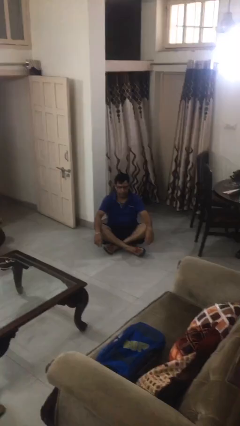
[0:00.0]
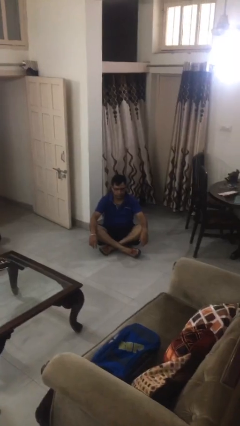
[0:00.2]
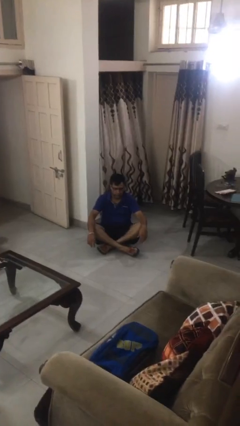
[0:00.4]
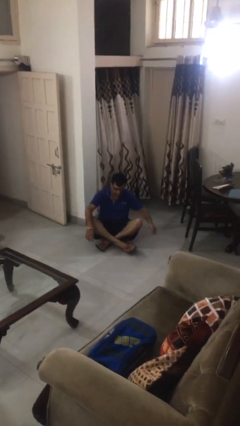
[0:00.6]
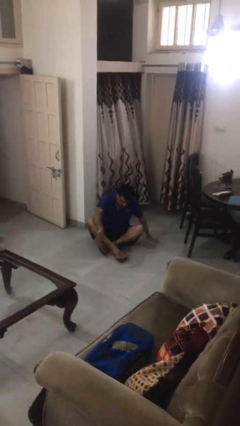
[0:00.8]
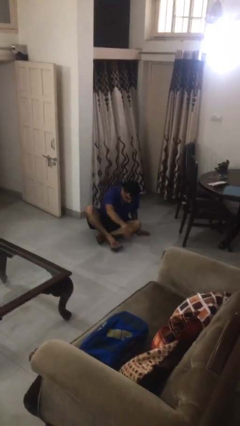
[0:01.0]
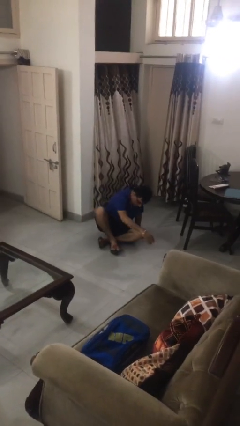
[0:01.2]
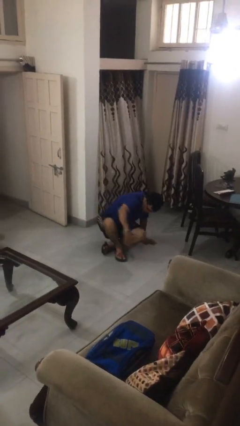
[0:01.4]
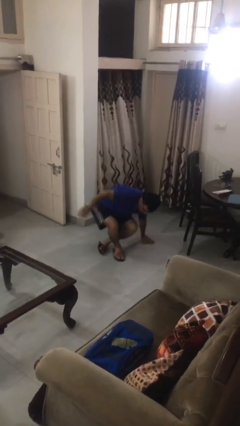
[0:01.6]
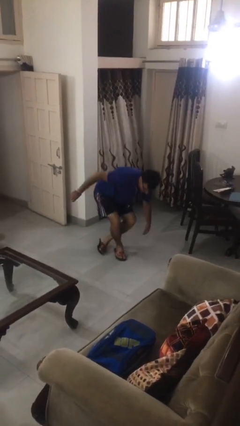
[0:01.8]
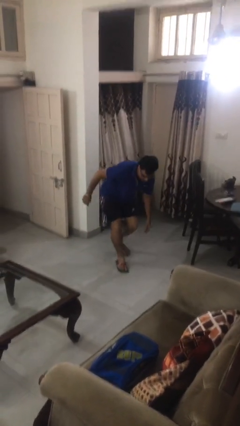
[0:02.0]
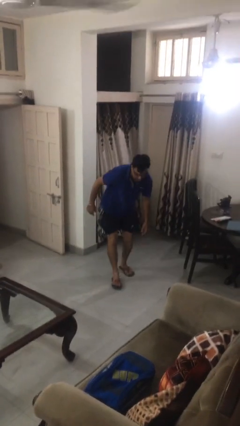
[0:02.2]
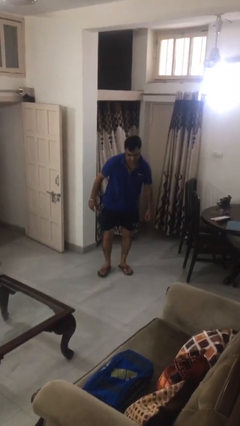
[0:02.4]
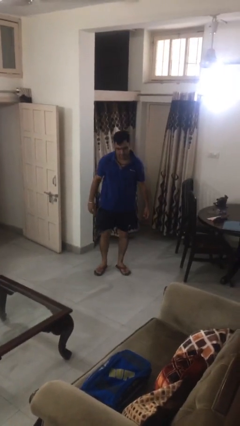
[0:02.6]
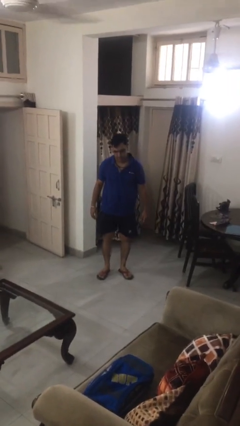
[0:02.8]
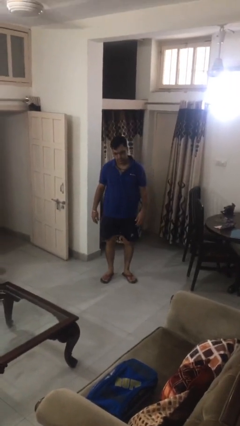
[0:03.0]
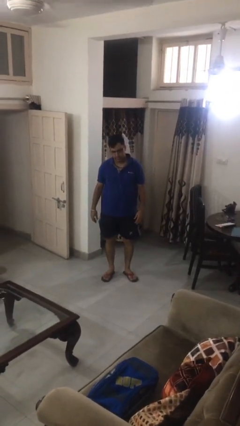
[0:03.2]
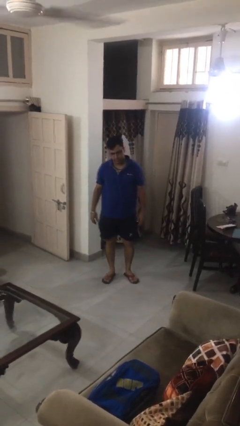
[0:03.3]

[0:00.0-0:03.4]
person stands up from floor

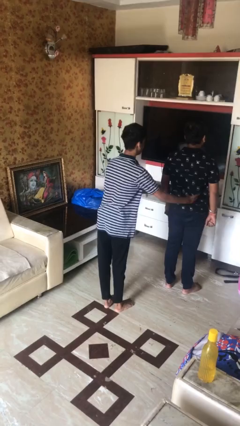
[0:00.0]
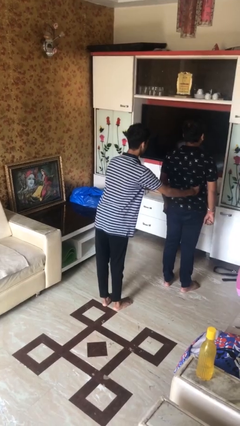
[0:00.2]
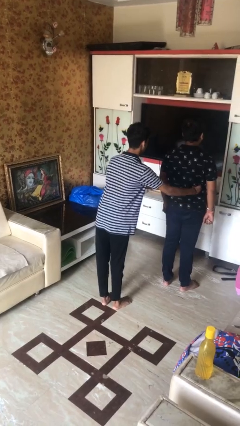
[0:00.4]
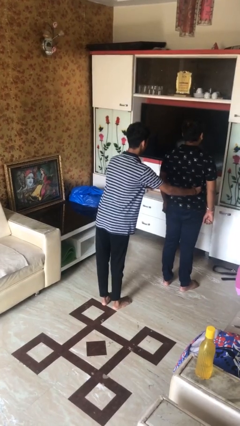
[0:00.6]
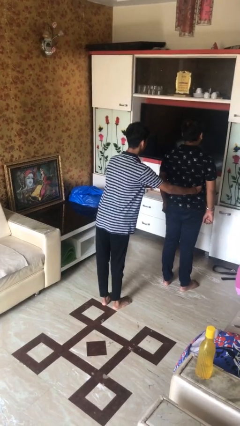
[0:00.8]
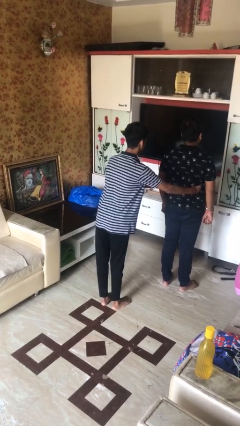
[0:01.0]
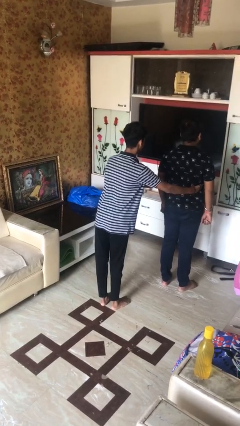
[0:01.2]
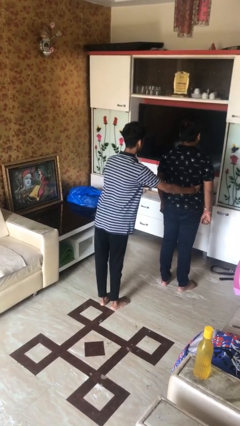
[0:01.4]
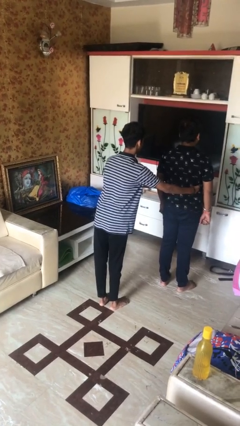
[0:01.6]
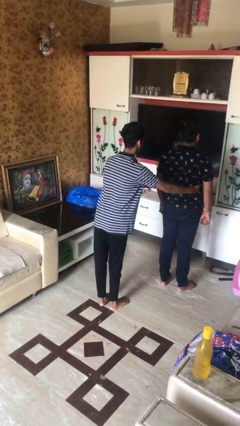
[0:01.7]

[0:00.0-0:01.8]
person tickles person

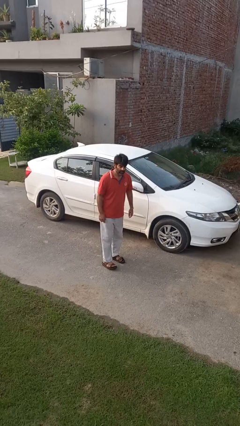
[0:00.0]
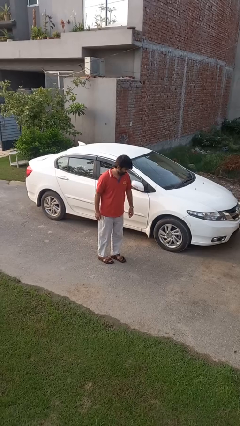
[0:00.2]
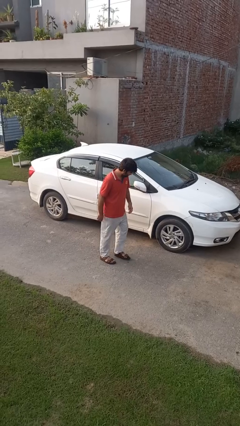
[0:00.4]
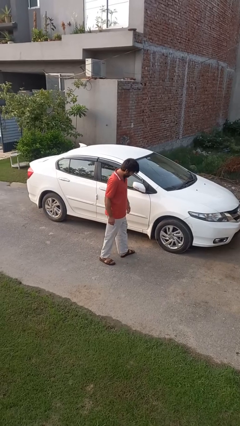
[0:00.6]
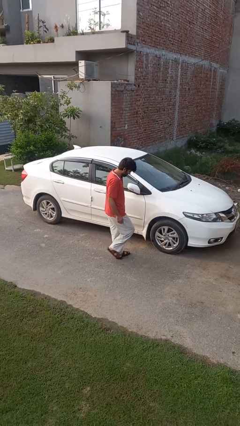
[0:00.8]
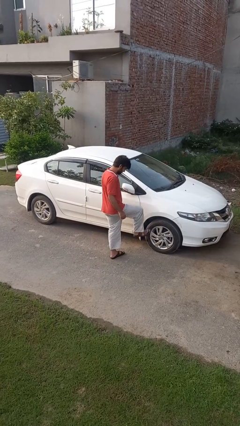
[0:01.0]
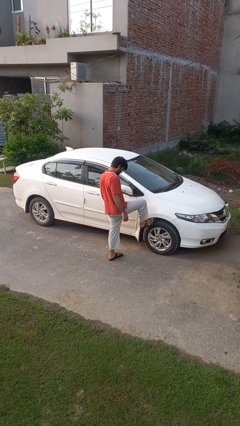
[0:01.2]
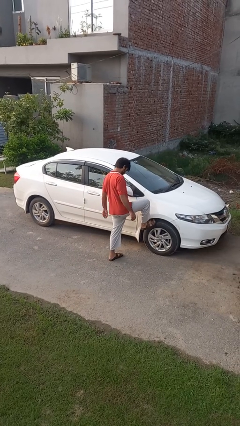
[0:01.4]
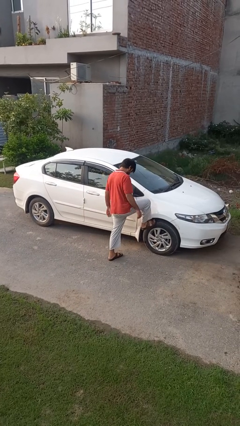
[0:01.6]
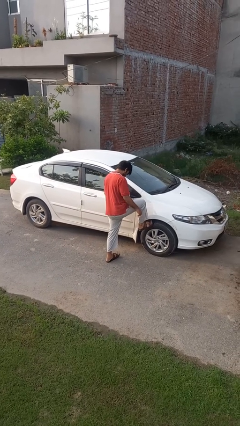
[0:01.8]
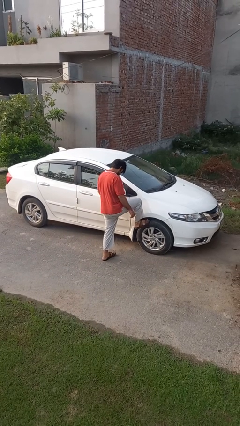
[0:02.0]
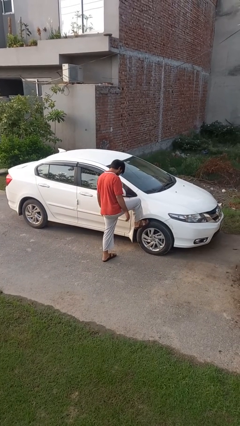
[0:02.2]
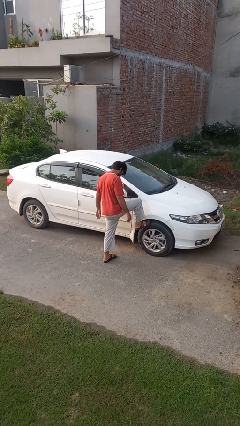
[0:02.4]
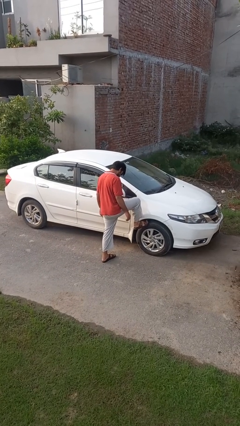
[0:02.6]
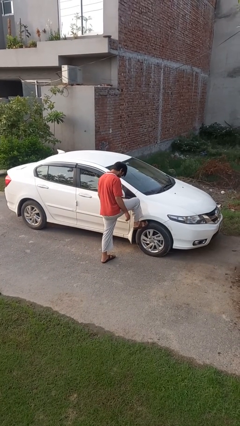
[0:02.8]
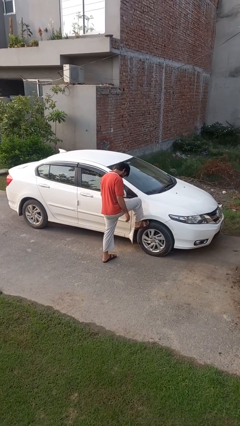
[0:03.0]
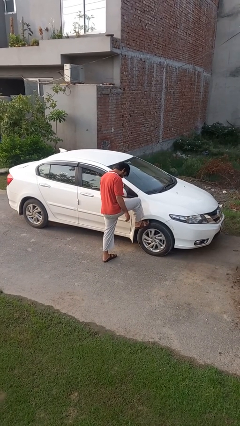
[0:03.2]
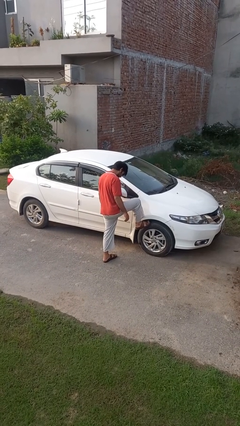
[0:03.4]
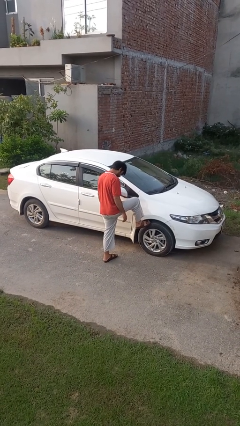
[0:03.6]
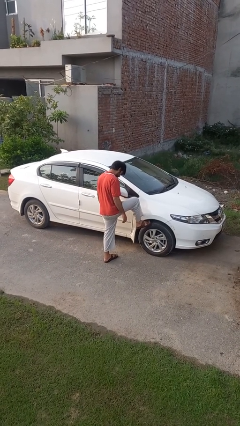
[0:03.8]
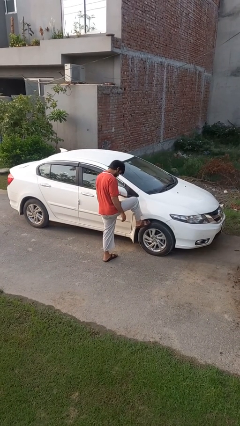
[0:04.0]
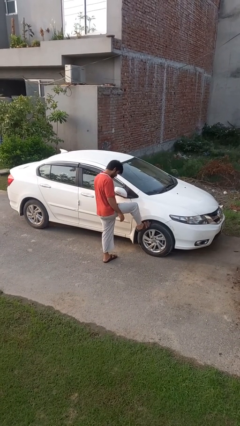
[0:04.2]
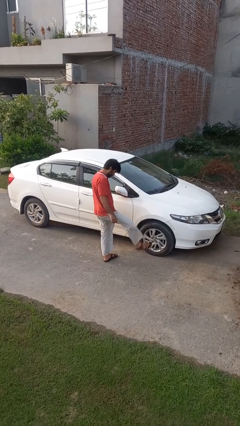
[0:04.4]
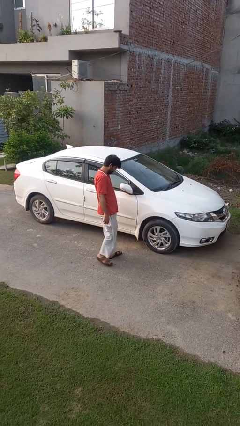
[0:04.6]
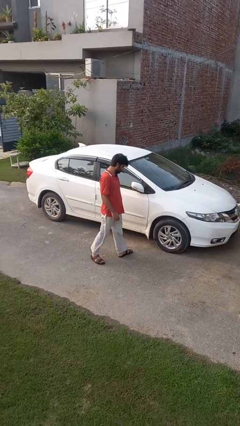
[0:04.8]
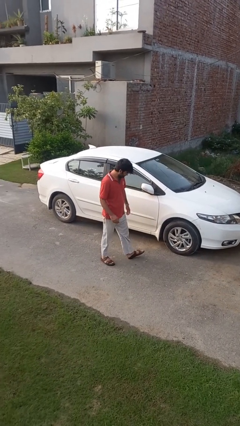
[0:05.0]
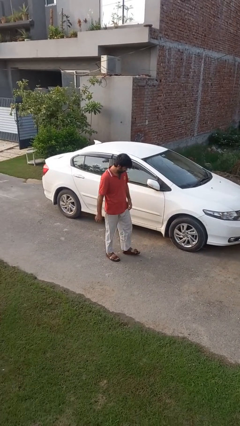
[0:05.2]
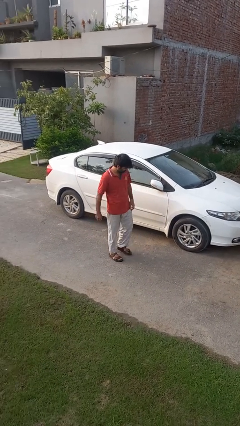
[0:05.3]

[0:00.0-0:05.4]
person kicks car tires

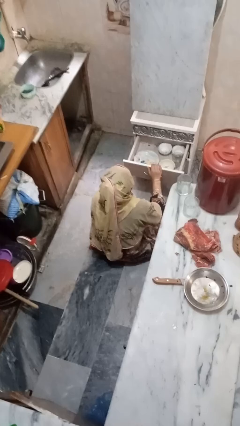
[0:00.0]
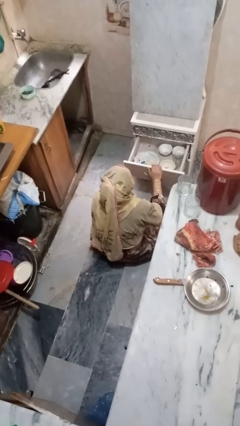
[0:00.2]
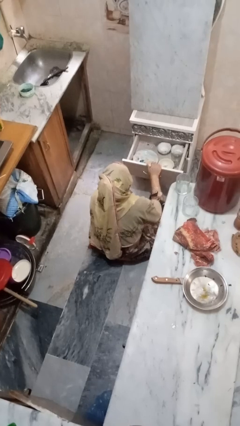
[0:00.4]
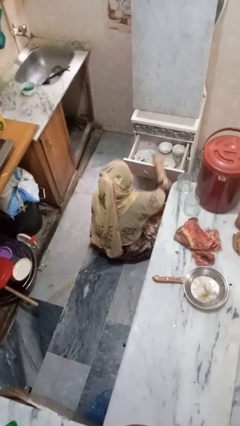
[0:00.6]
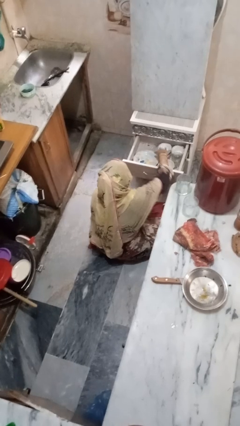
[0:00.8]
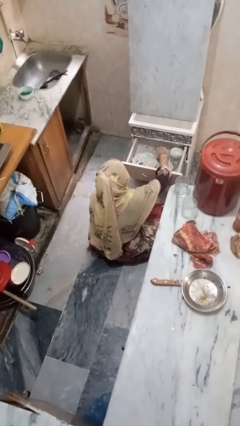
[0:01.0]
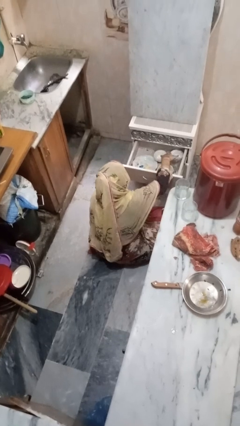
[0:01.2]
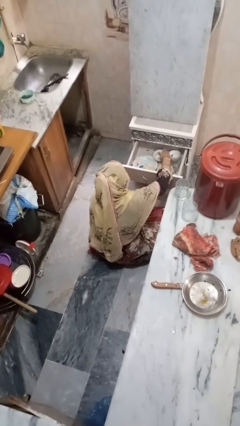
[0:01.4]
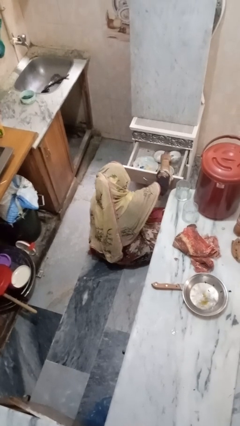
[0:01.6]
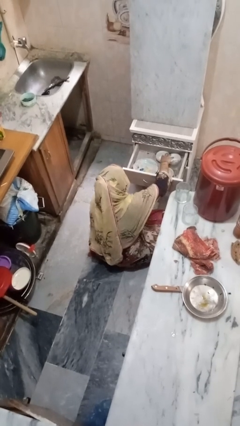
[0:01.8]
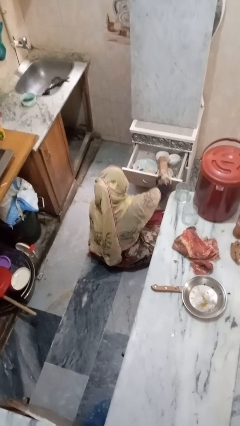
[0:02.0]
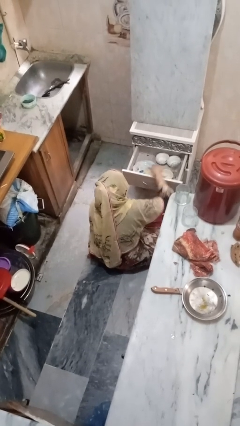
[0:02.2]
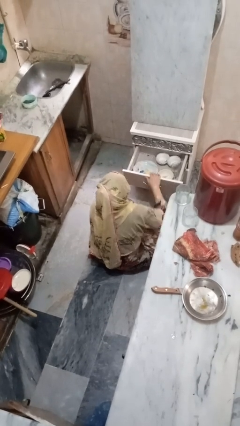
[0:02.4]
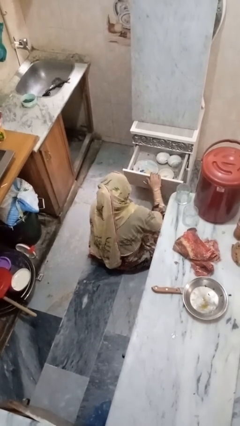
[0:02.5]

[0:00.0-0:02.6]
person searches in kitchen drawer

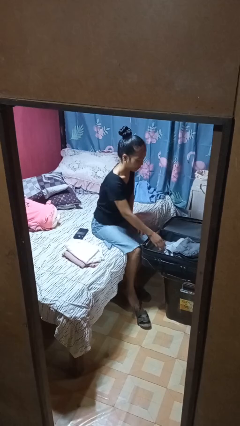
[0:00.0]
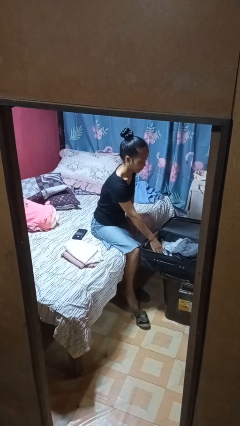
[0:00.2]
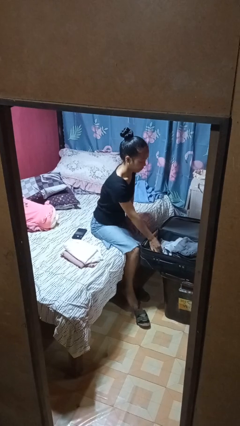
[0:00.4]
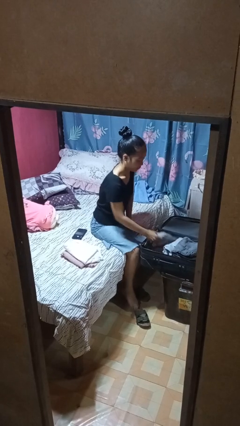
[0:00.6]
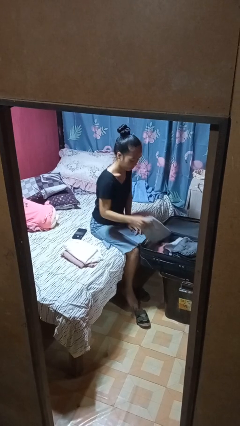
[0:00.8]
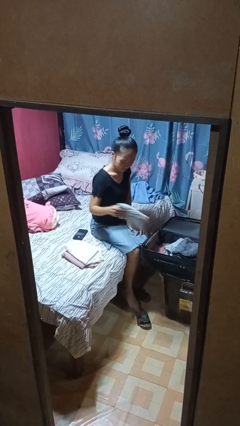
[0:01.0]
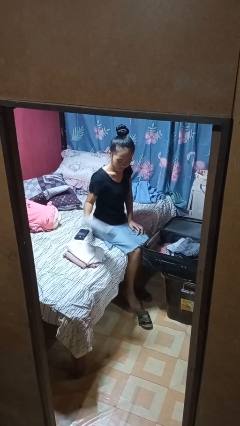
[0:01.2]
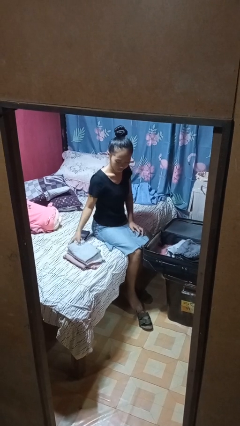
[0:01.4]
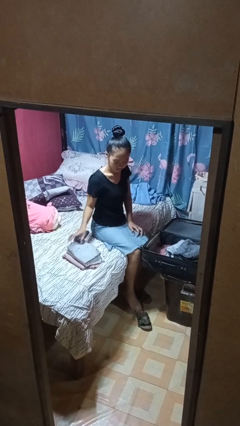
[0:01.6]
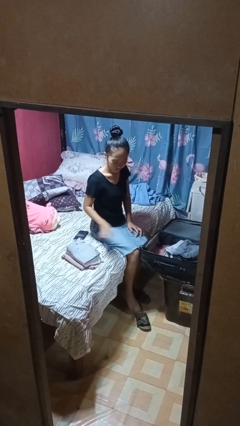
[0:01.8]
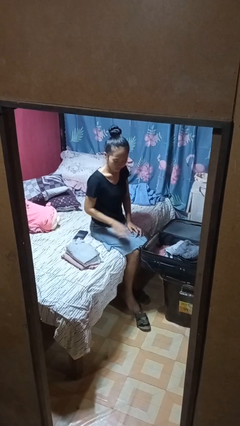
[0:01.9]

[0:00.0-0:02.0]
person unloads clothes from suitcase

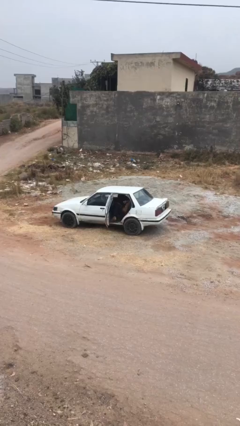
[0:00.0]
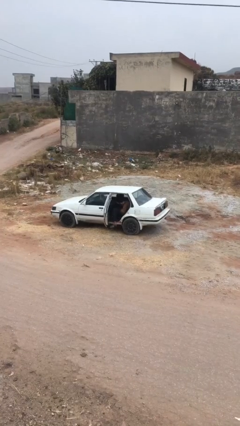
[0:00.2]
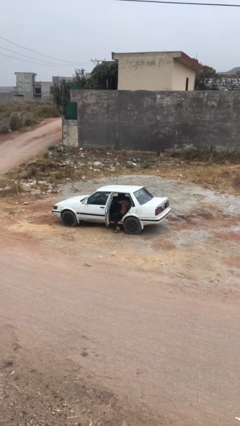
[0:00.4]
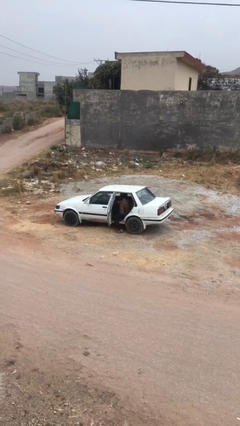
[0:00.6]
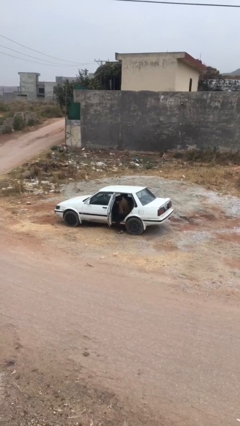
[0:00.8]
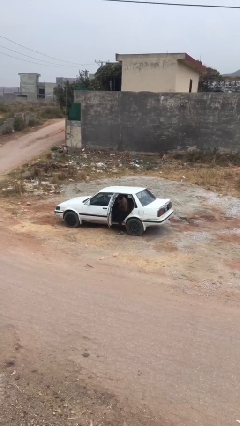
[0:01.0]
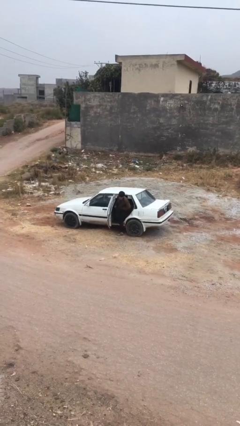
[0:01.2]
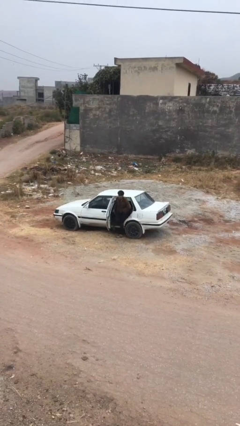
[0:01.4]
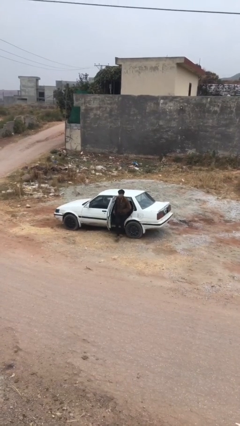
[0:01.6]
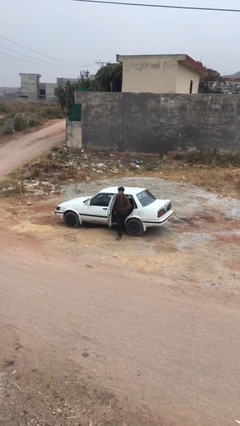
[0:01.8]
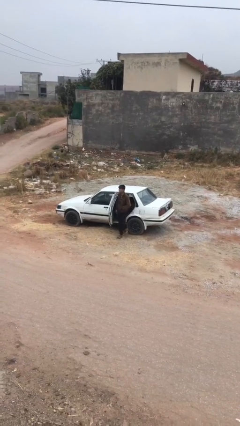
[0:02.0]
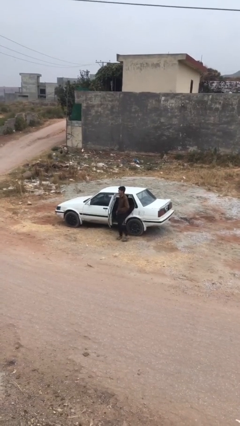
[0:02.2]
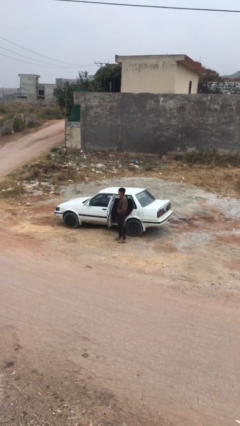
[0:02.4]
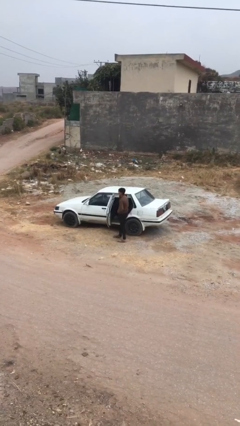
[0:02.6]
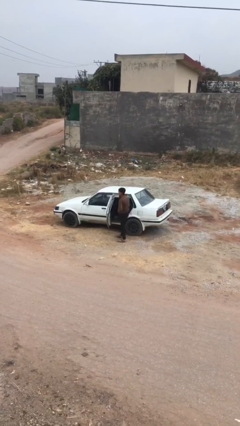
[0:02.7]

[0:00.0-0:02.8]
person exits car

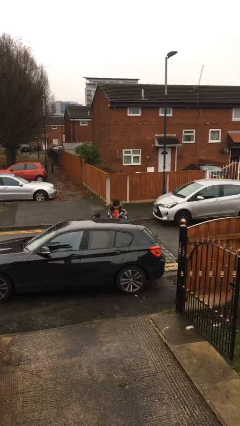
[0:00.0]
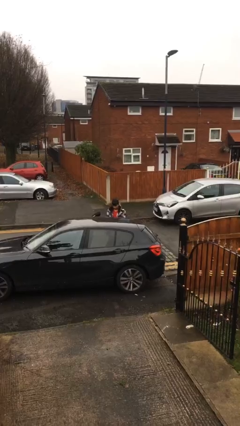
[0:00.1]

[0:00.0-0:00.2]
person loads car
